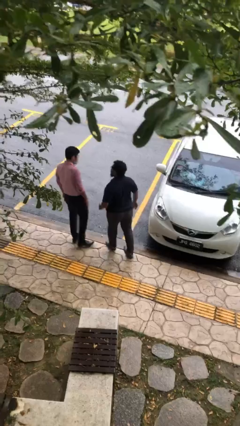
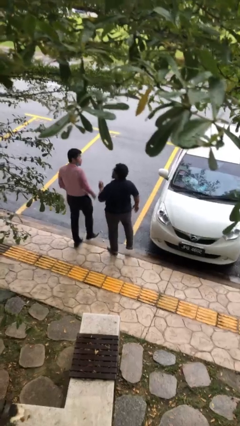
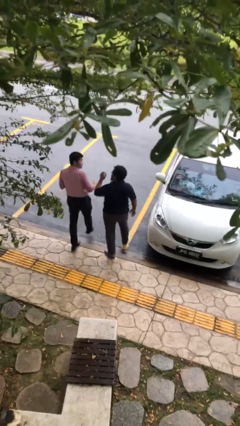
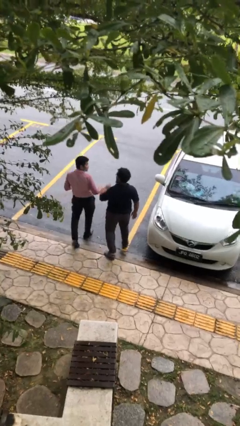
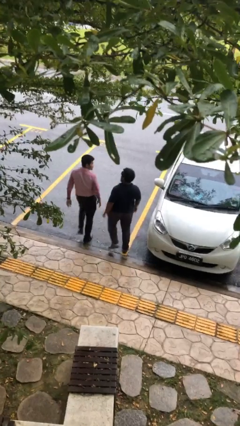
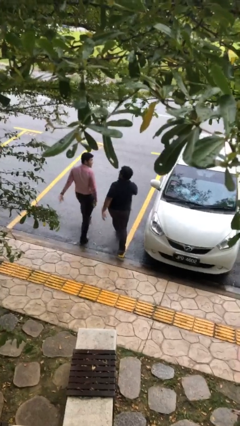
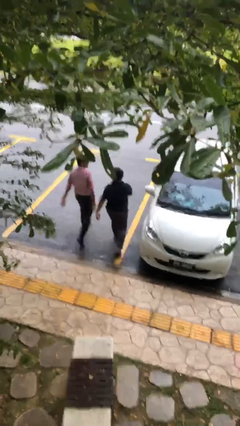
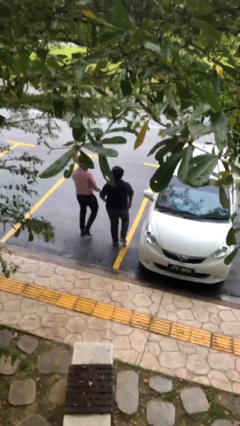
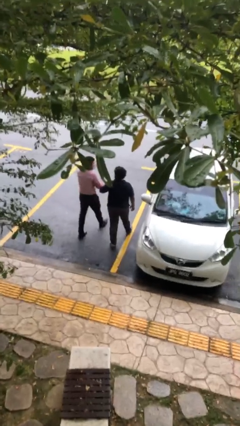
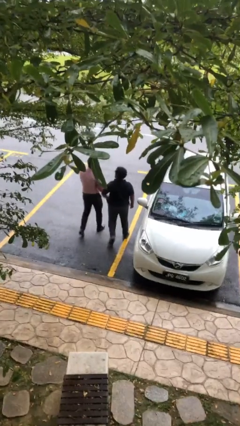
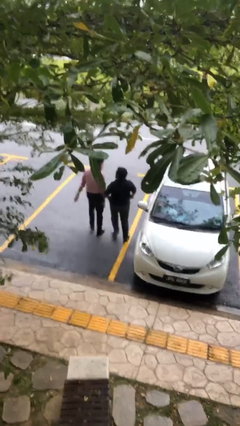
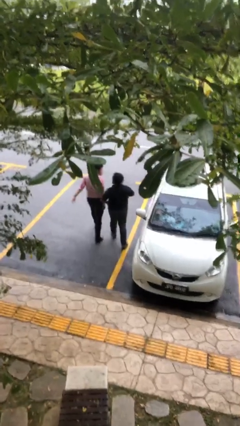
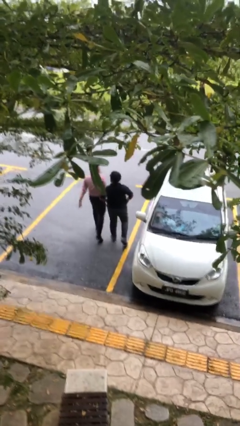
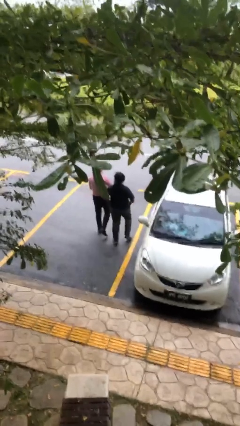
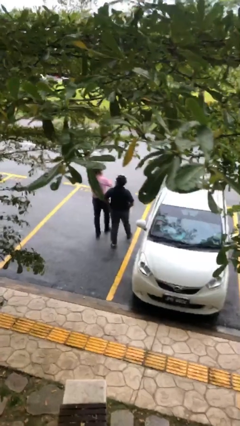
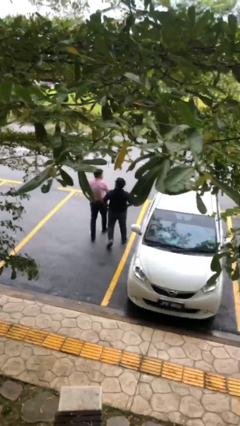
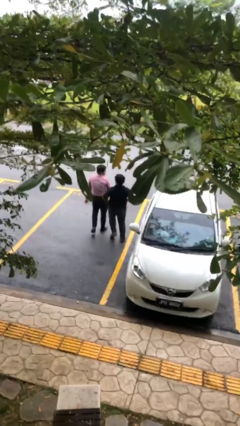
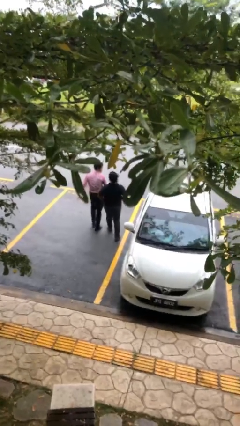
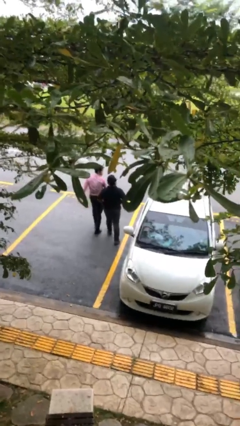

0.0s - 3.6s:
person talks to person

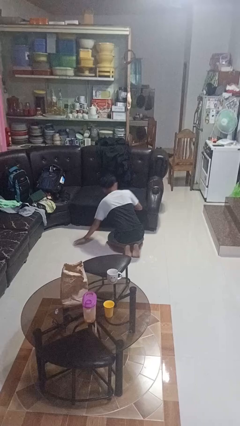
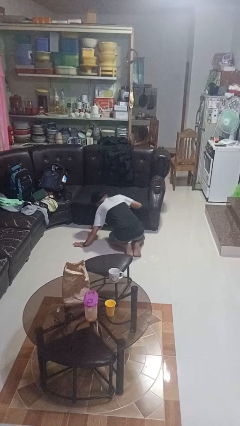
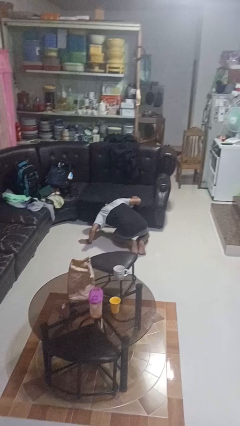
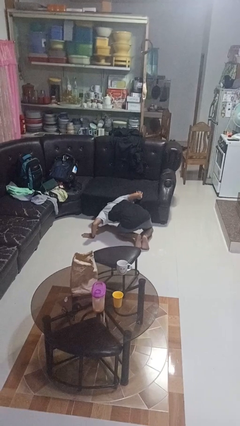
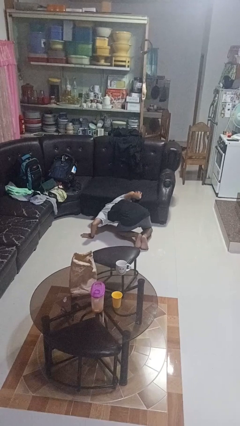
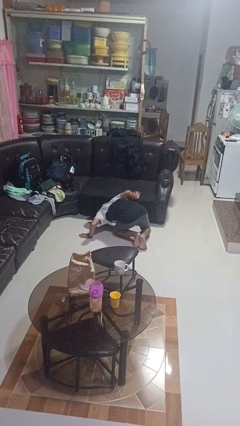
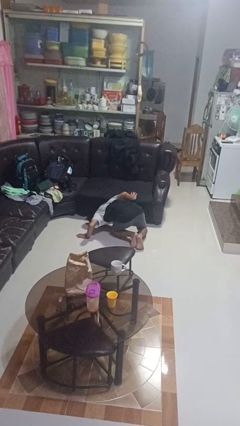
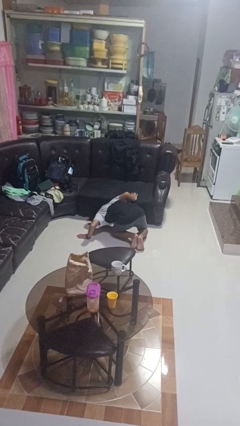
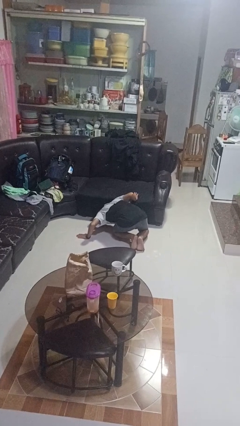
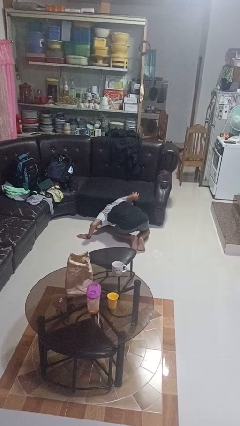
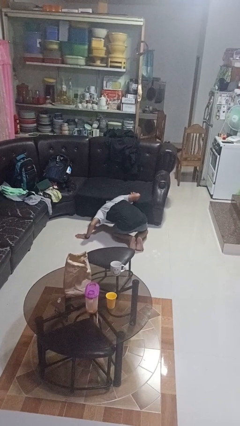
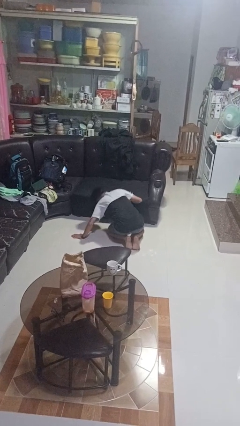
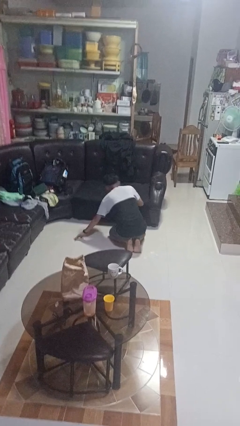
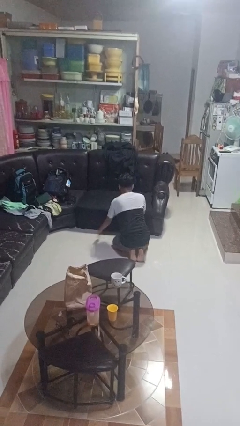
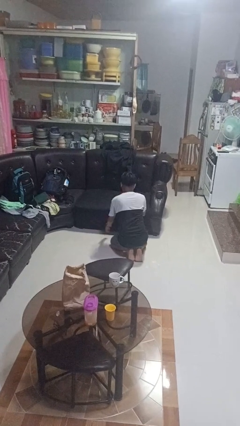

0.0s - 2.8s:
person searches under couch

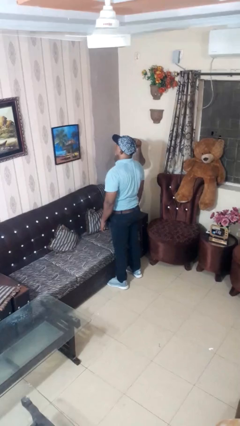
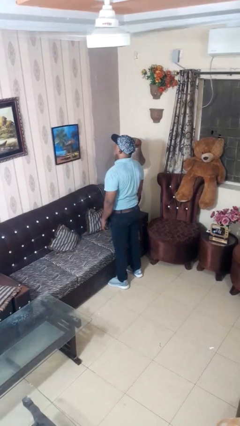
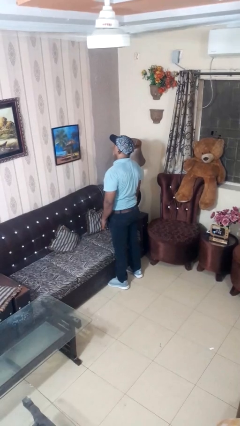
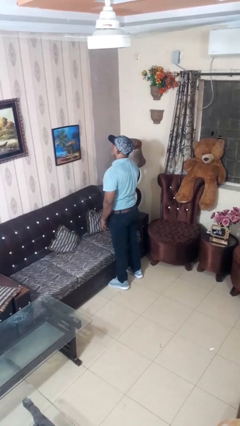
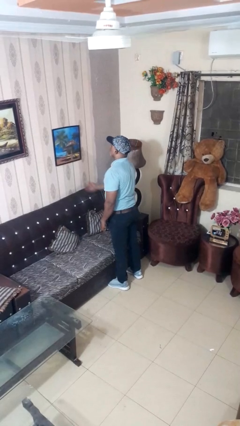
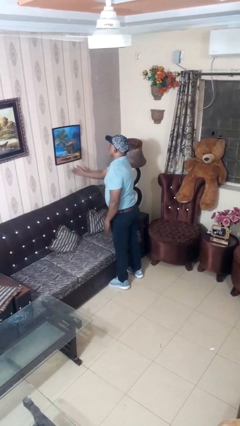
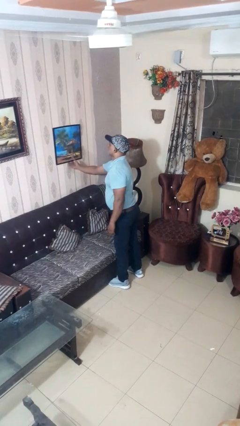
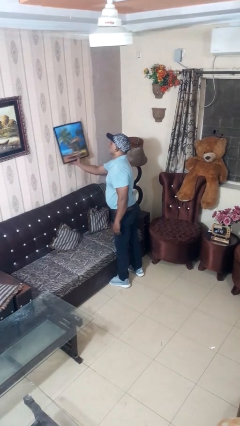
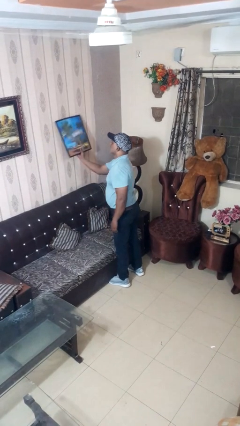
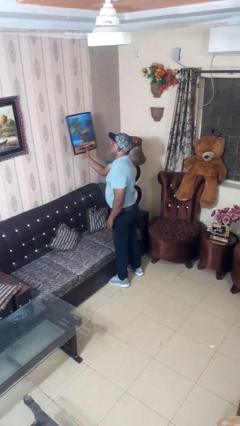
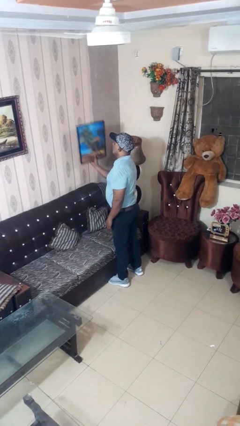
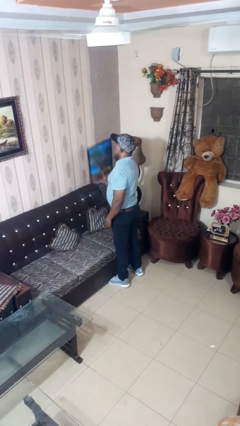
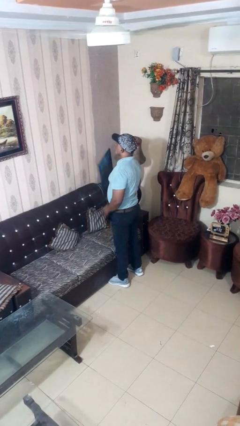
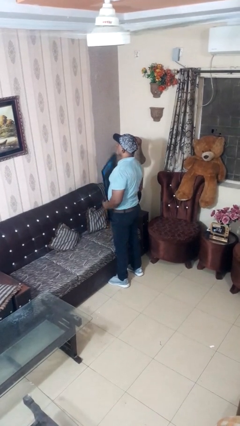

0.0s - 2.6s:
person takes down picture frame

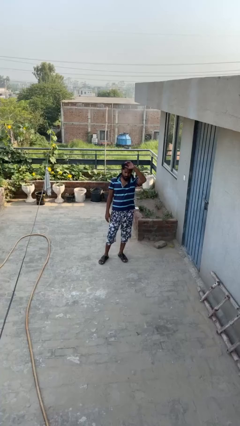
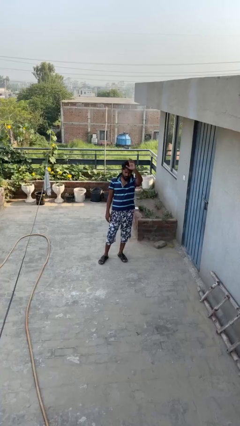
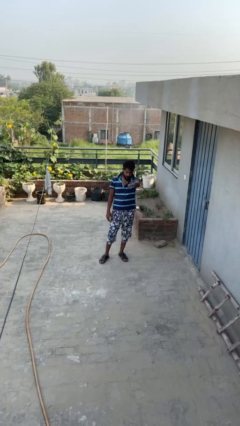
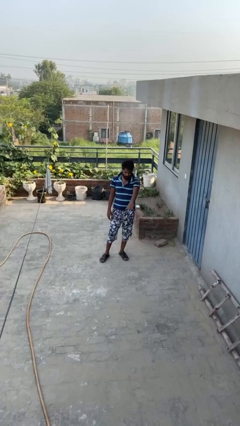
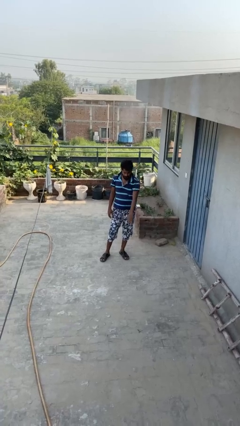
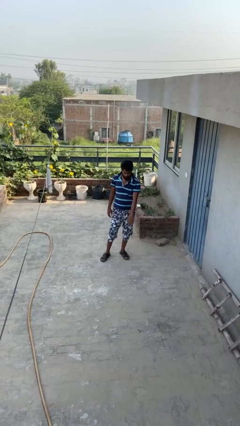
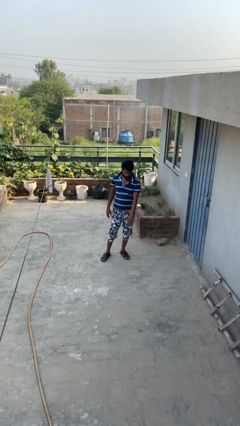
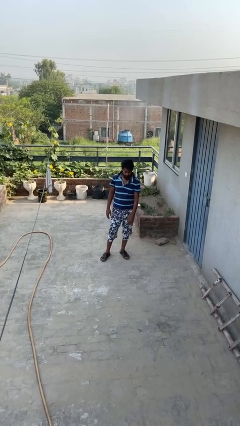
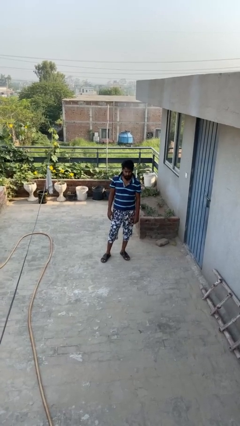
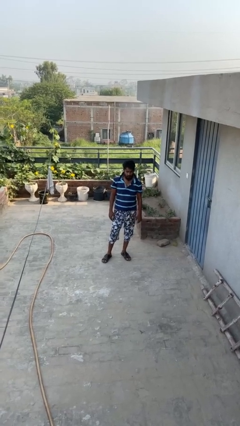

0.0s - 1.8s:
person gestures swipe down

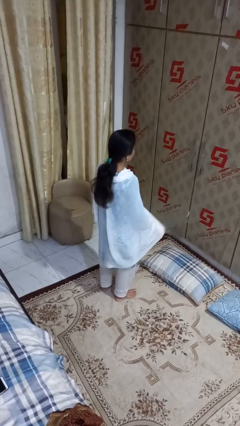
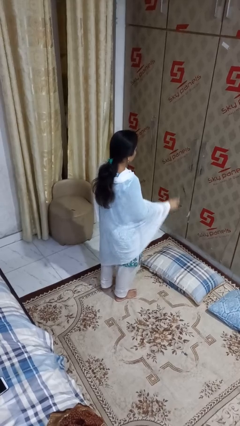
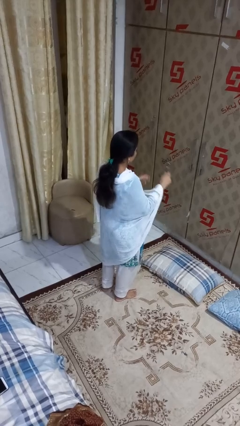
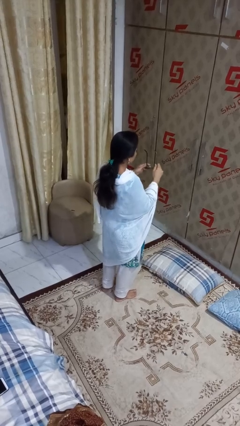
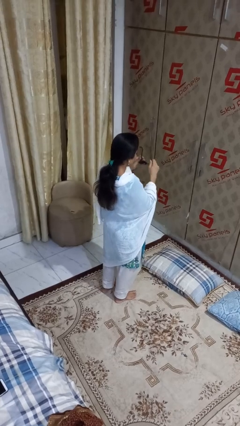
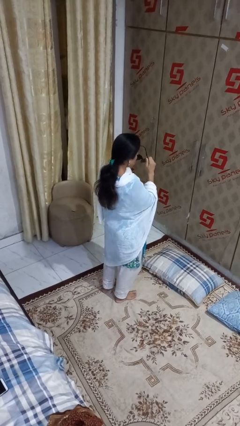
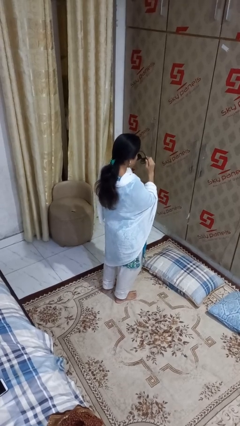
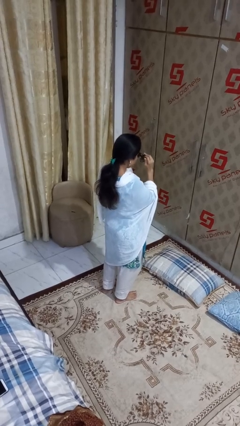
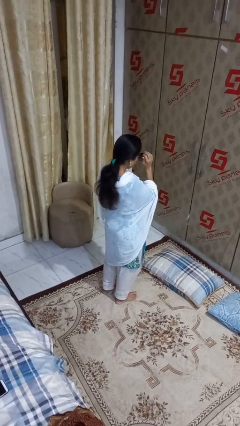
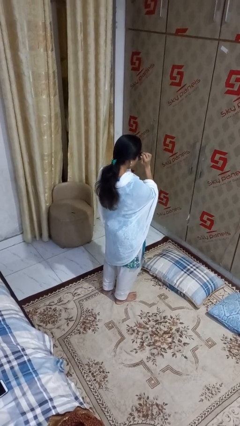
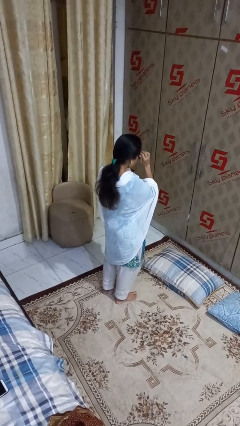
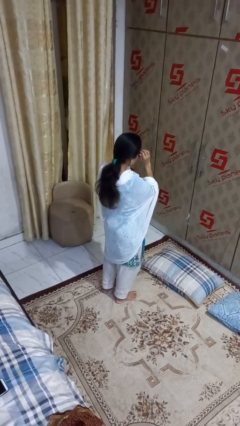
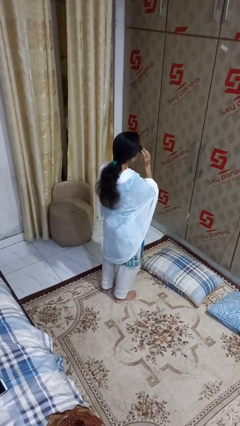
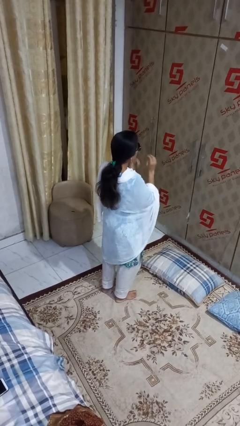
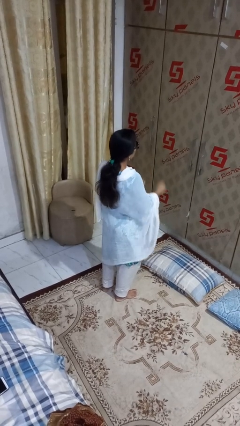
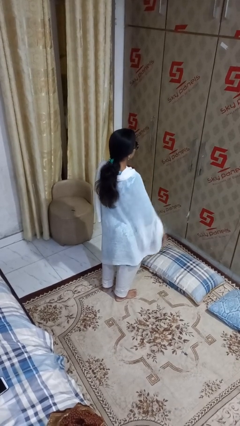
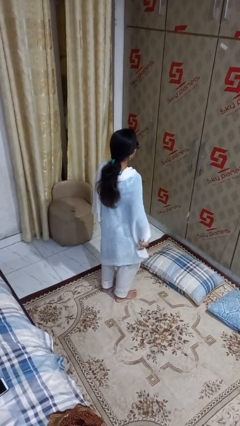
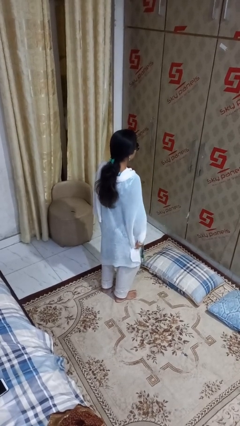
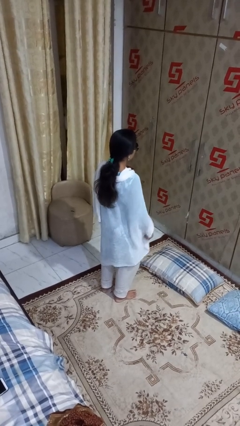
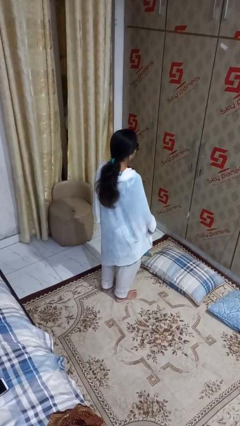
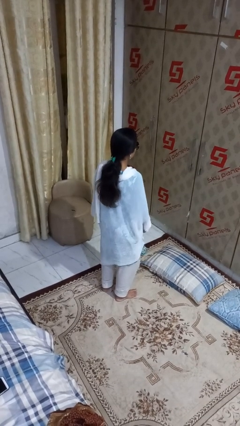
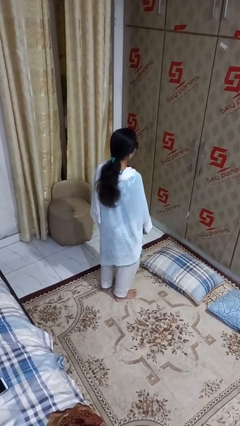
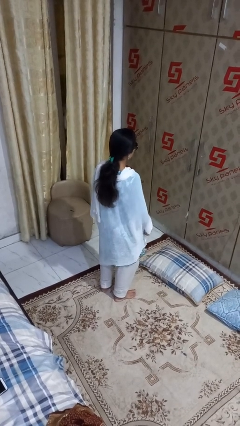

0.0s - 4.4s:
person puts on sunglasses

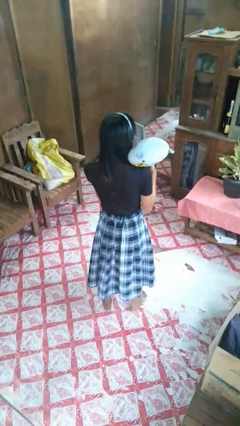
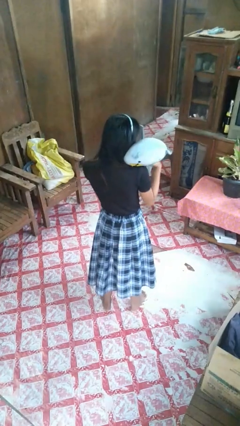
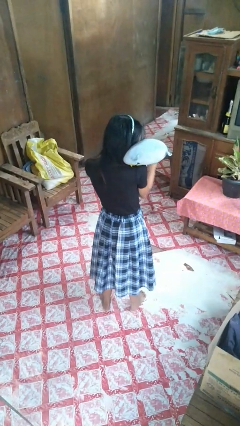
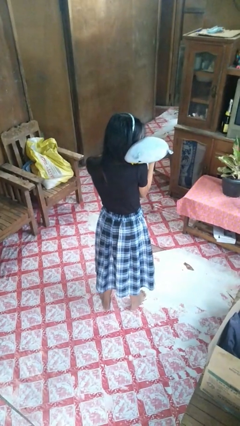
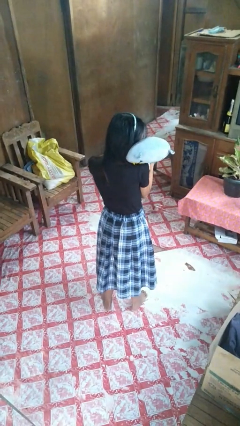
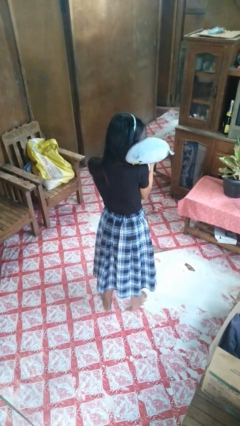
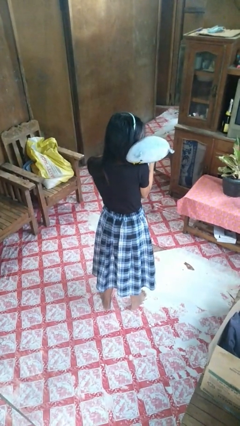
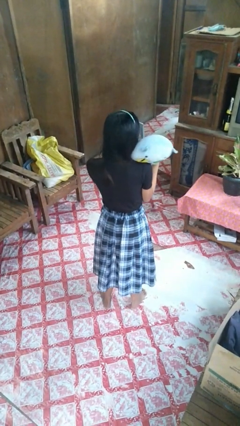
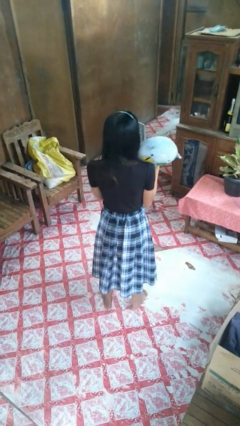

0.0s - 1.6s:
person hugs stuffed animal

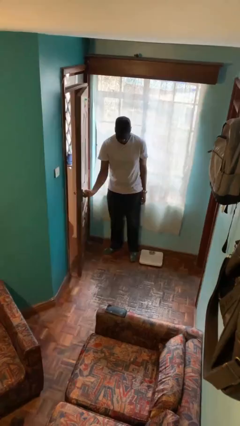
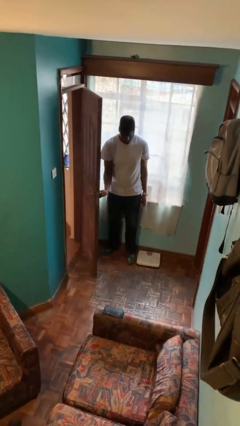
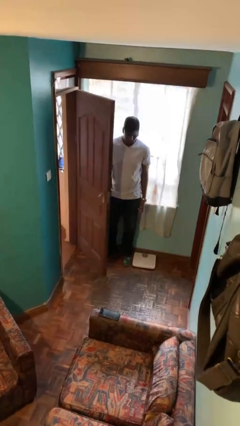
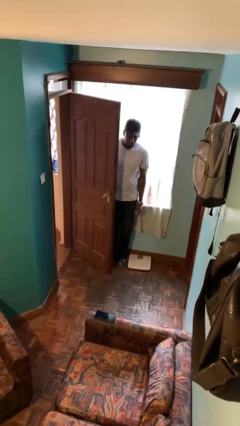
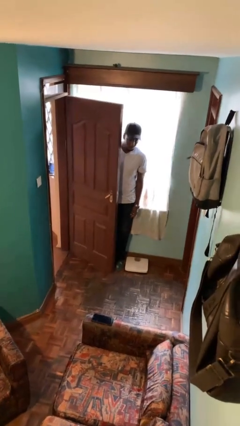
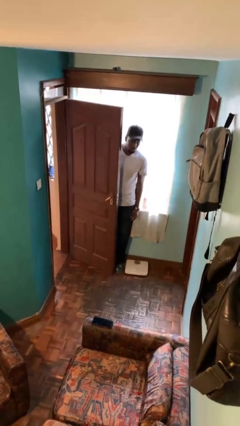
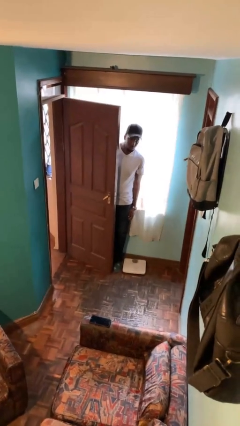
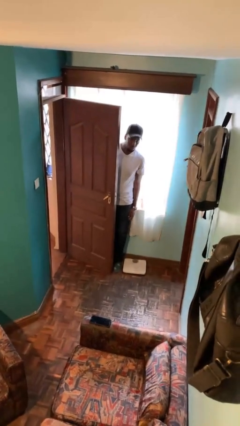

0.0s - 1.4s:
person opens facility door
